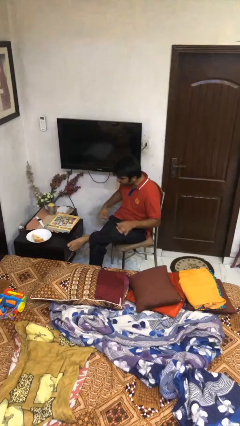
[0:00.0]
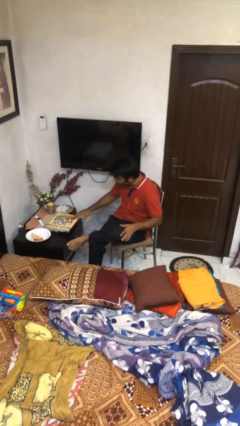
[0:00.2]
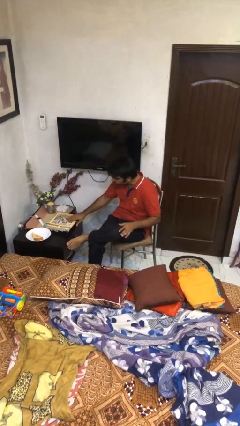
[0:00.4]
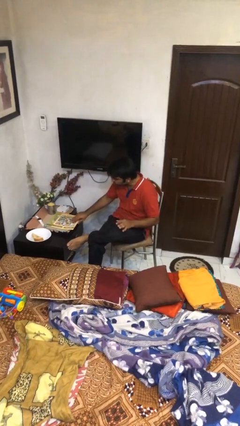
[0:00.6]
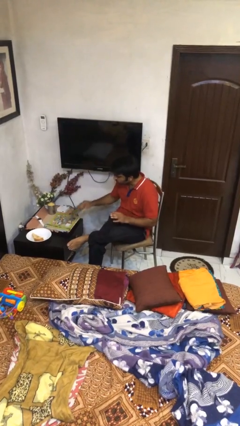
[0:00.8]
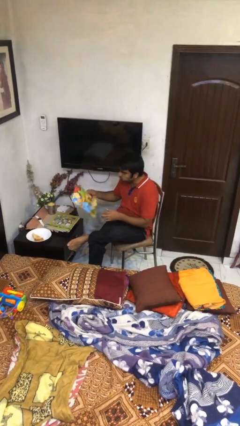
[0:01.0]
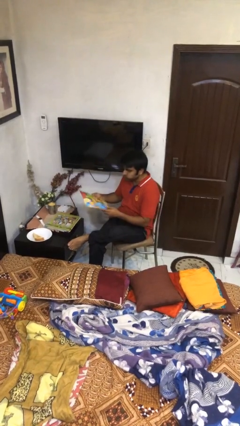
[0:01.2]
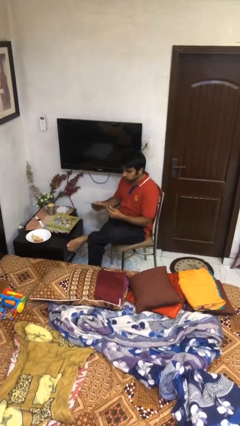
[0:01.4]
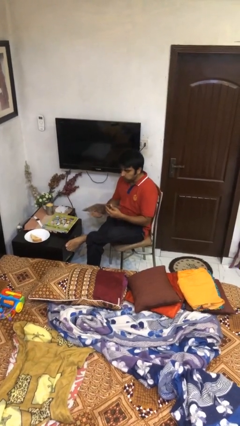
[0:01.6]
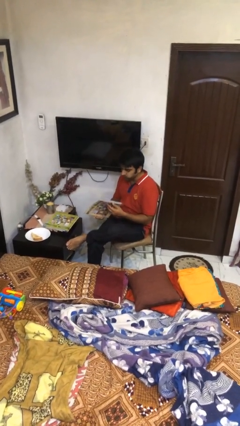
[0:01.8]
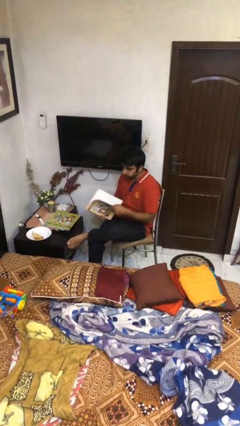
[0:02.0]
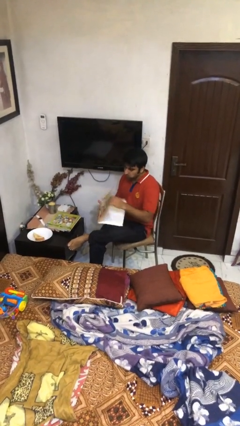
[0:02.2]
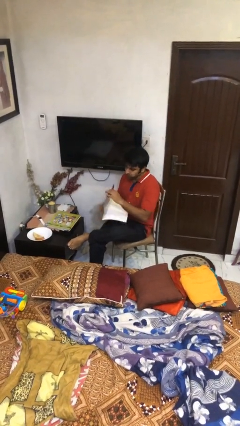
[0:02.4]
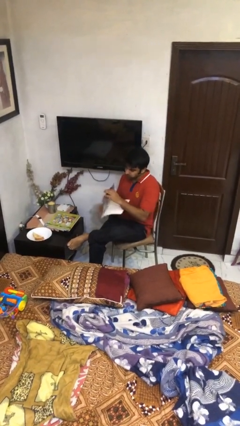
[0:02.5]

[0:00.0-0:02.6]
person picks up object from table

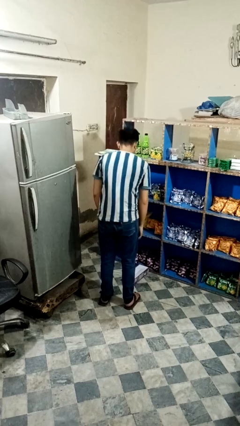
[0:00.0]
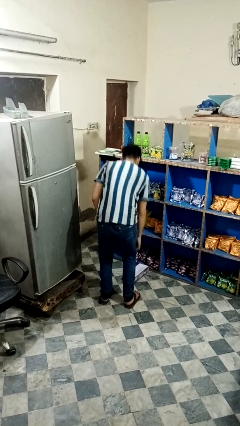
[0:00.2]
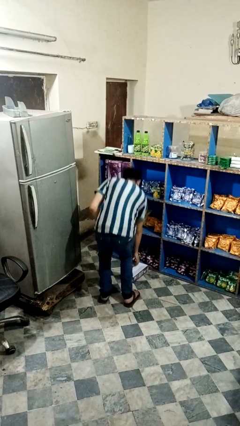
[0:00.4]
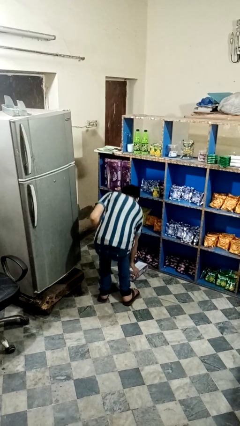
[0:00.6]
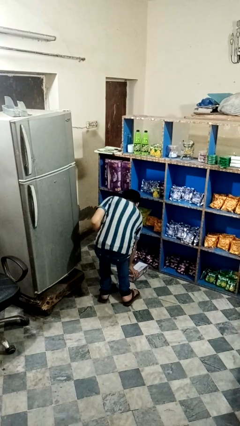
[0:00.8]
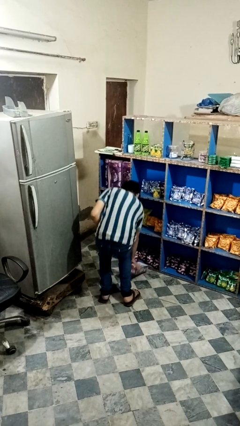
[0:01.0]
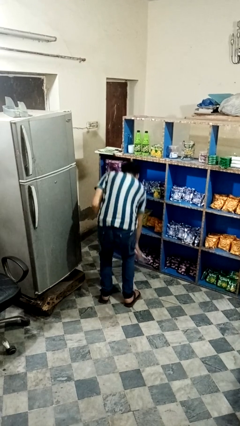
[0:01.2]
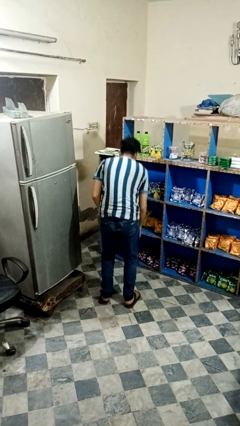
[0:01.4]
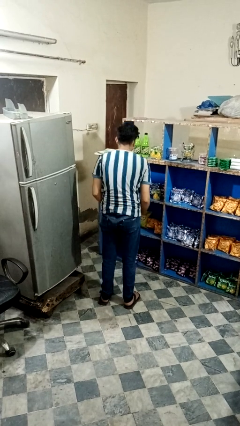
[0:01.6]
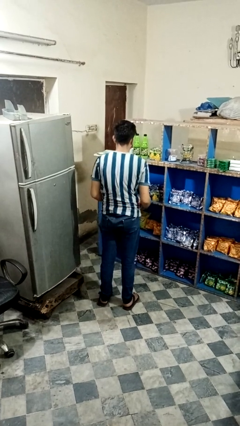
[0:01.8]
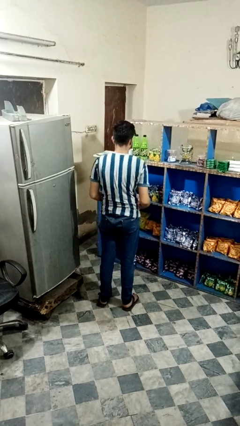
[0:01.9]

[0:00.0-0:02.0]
person picks up object from floor

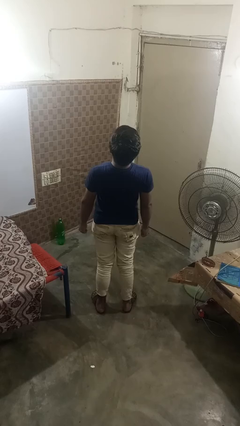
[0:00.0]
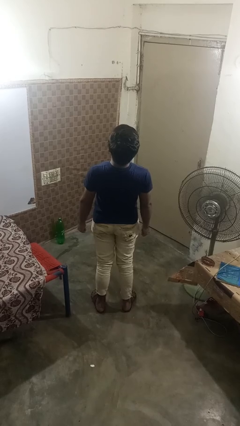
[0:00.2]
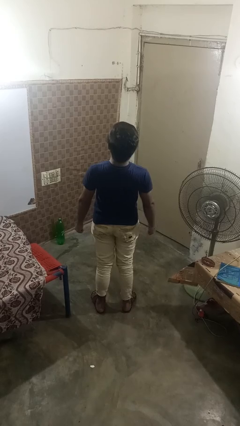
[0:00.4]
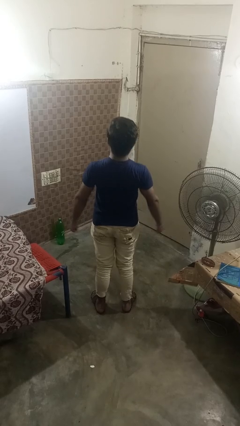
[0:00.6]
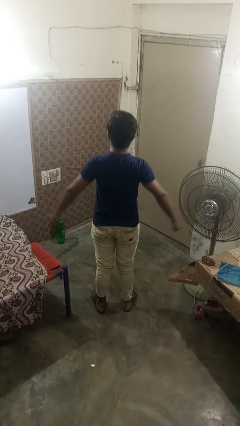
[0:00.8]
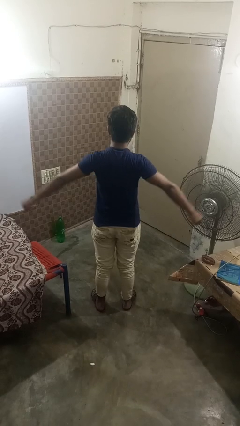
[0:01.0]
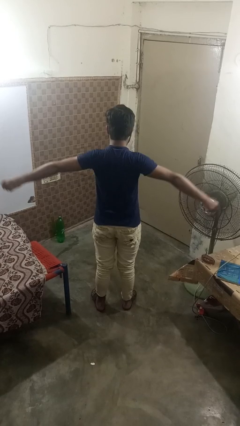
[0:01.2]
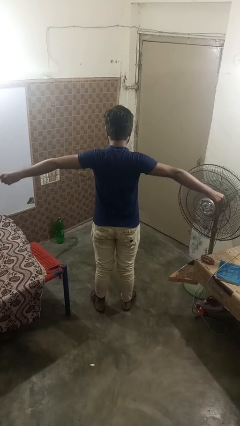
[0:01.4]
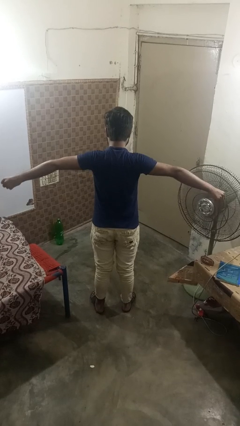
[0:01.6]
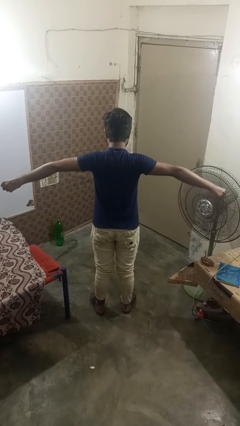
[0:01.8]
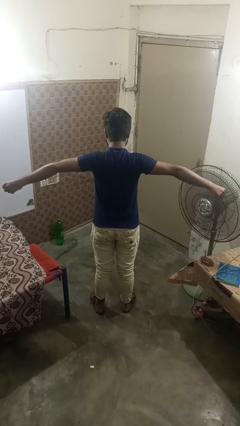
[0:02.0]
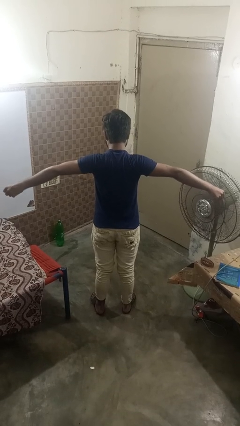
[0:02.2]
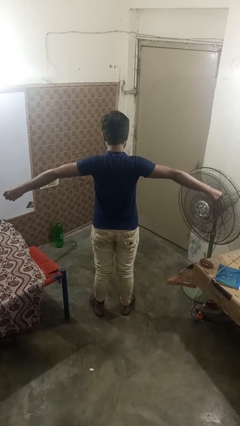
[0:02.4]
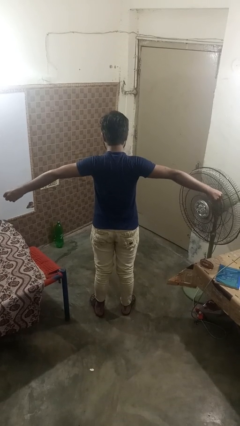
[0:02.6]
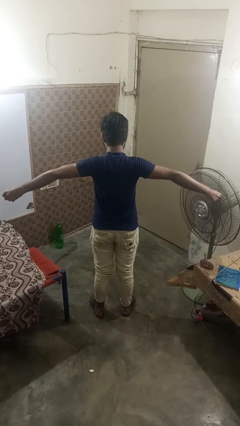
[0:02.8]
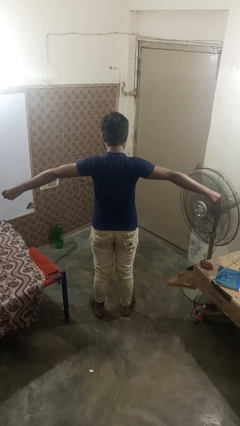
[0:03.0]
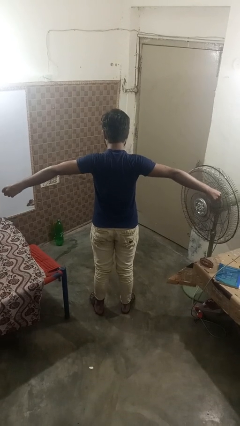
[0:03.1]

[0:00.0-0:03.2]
person stretches arms to side

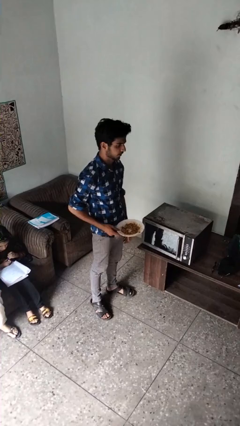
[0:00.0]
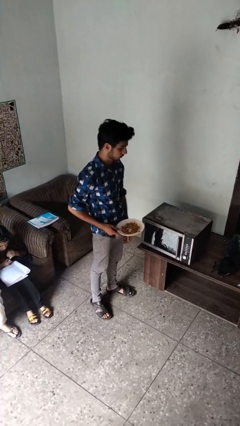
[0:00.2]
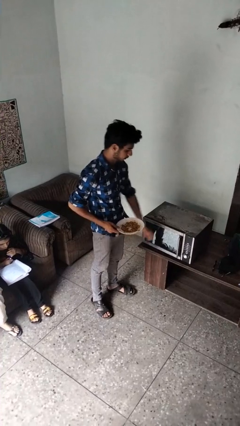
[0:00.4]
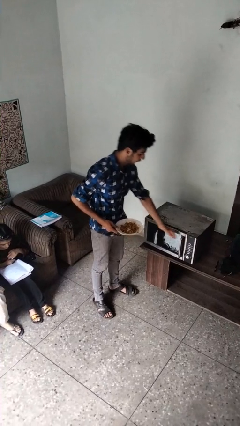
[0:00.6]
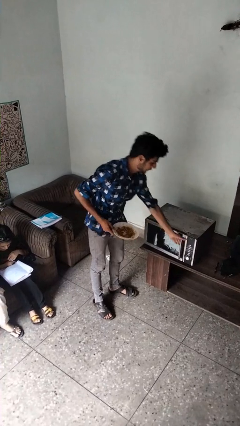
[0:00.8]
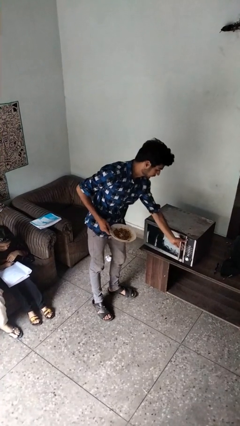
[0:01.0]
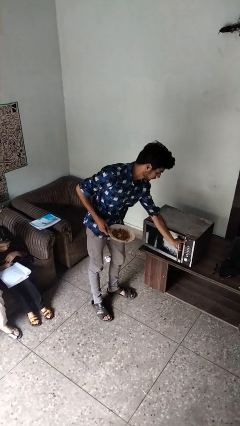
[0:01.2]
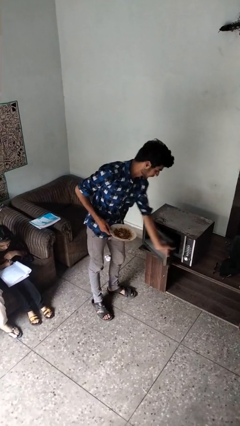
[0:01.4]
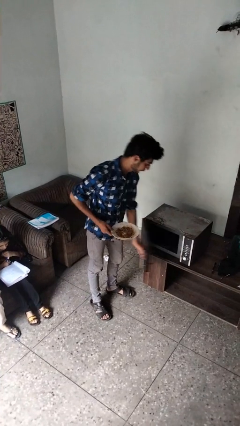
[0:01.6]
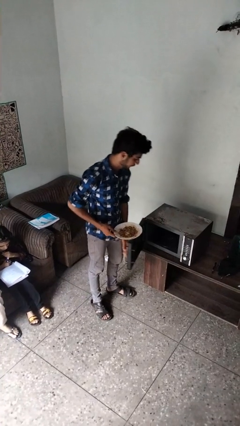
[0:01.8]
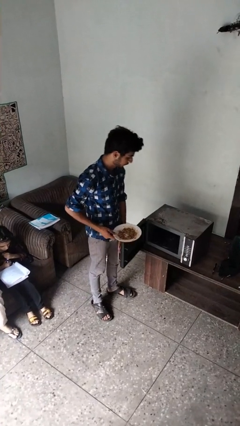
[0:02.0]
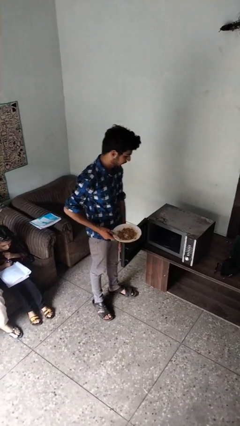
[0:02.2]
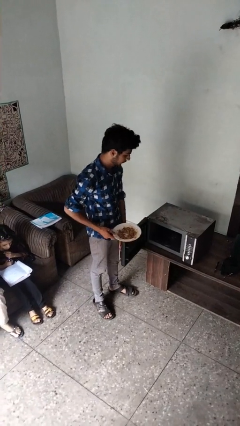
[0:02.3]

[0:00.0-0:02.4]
person opens microwave

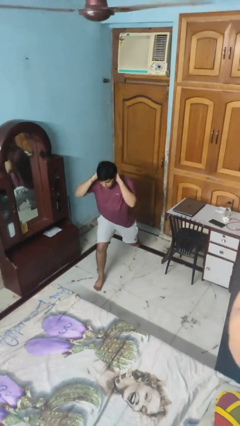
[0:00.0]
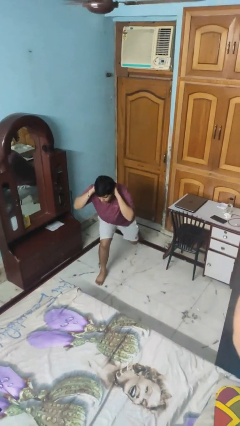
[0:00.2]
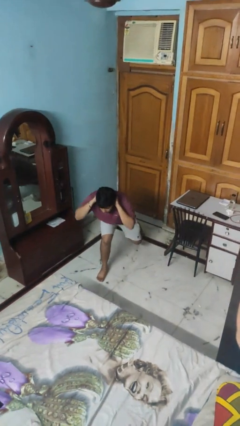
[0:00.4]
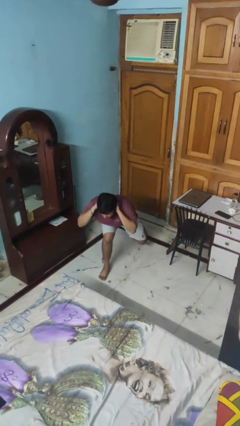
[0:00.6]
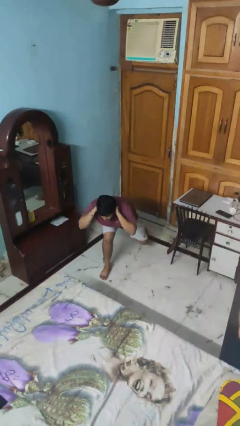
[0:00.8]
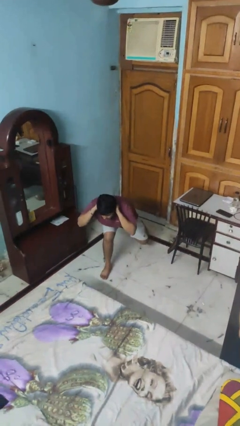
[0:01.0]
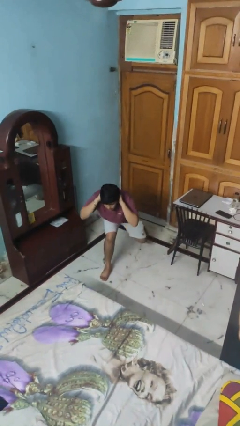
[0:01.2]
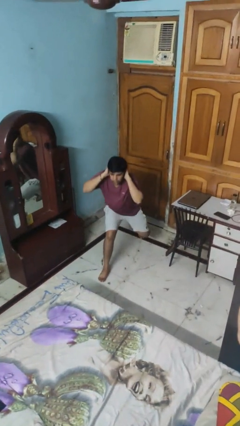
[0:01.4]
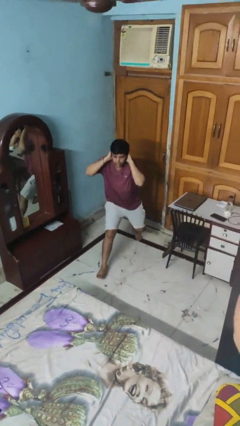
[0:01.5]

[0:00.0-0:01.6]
person exercises with lunges

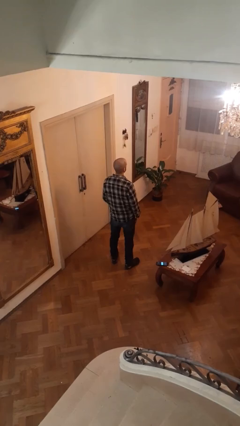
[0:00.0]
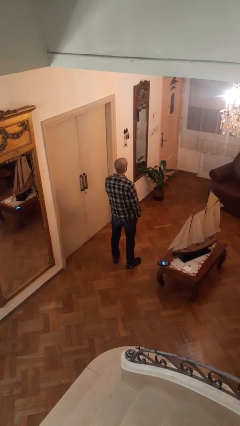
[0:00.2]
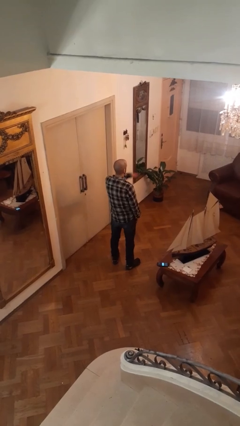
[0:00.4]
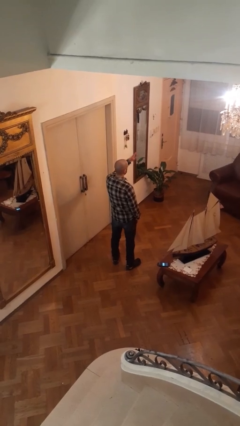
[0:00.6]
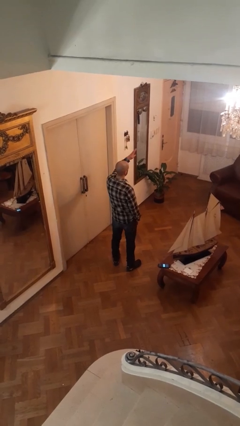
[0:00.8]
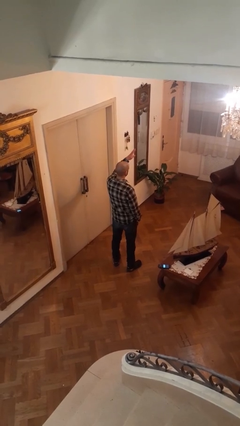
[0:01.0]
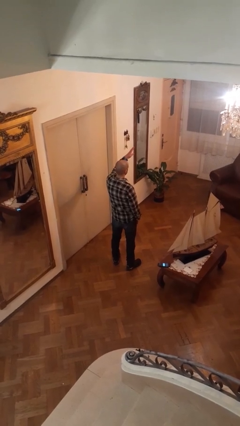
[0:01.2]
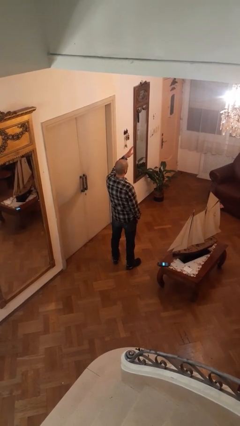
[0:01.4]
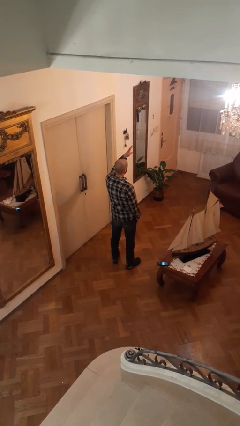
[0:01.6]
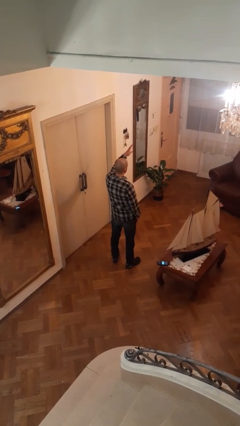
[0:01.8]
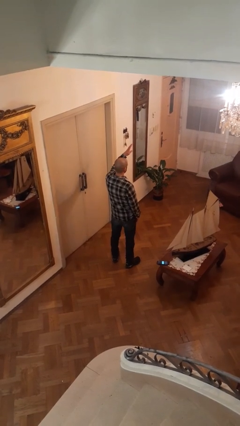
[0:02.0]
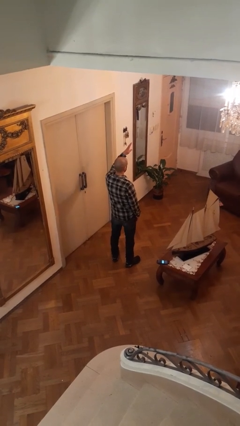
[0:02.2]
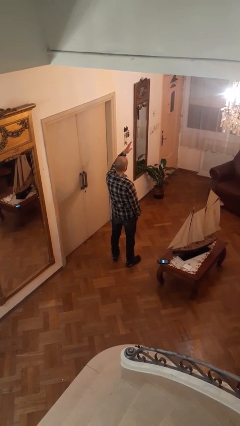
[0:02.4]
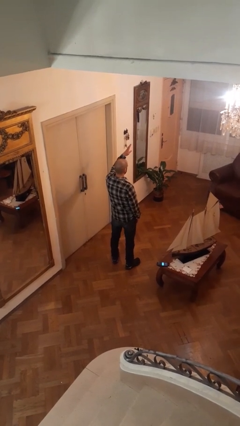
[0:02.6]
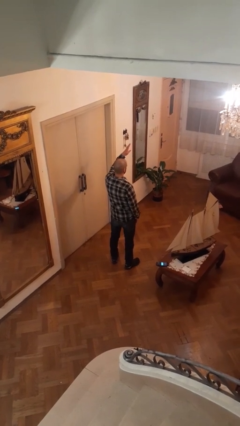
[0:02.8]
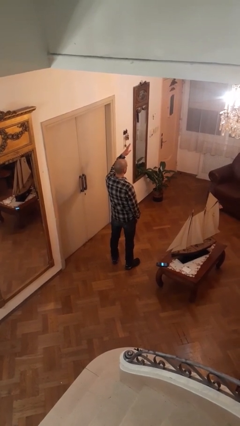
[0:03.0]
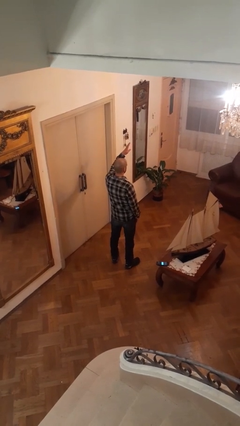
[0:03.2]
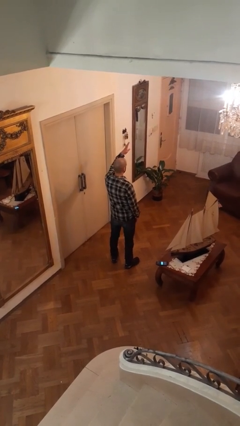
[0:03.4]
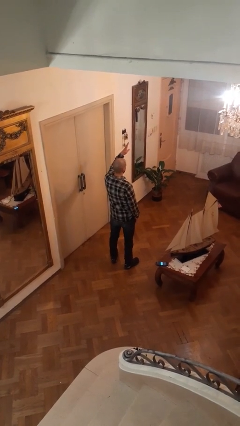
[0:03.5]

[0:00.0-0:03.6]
person gestures swipe up

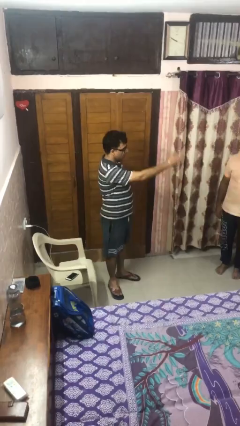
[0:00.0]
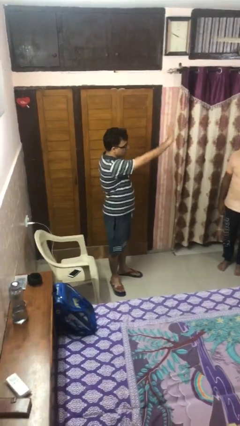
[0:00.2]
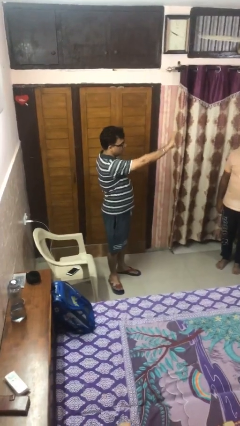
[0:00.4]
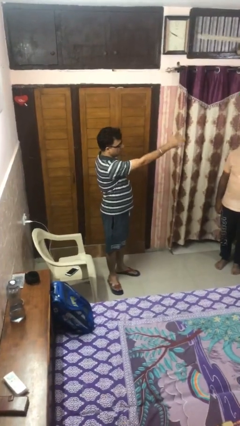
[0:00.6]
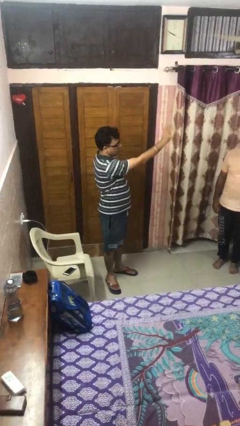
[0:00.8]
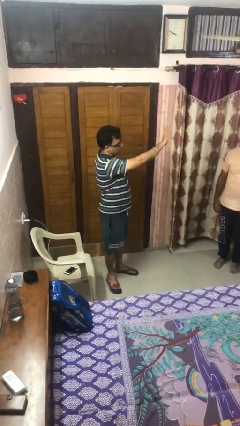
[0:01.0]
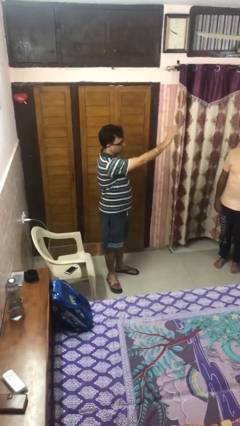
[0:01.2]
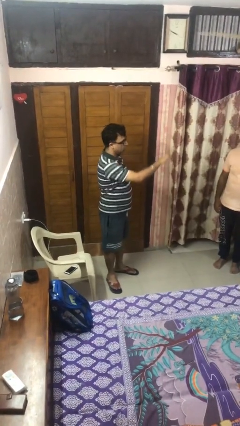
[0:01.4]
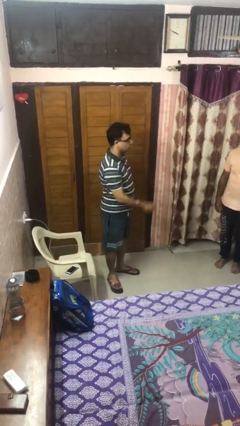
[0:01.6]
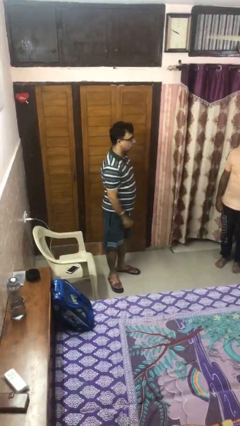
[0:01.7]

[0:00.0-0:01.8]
person waves at person
